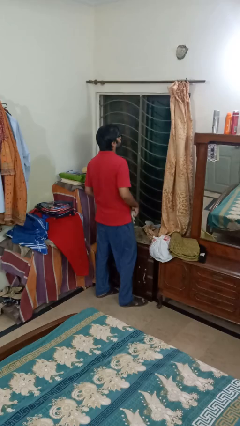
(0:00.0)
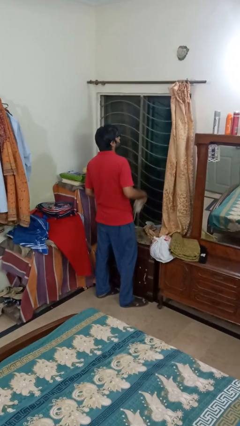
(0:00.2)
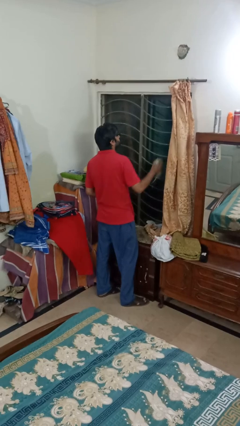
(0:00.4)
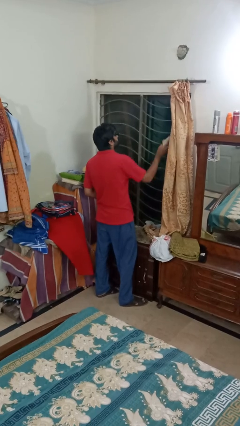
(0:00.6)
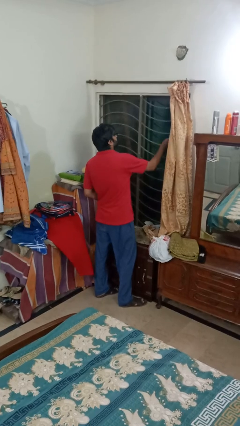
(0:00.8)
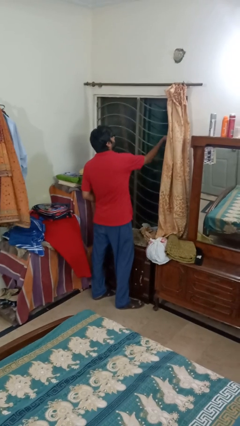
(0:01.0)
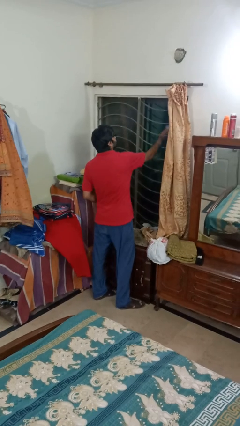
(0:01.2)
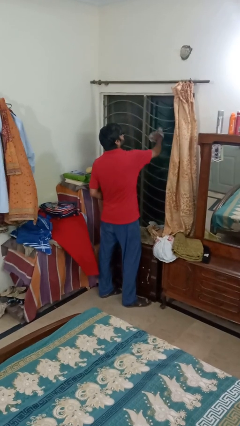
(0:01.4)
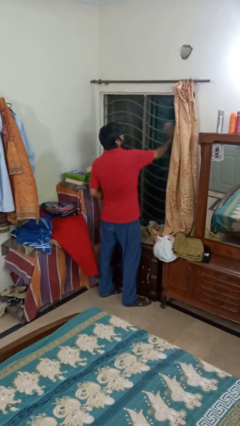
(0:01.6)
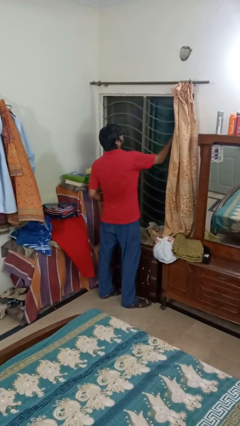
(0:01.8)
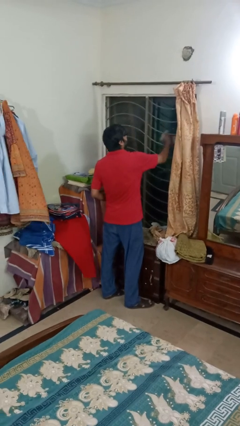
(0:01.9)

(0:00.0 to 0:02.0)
person washes window

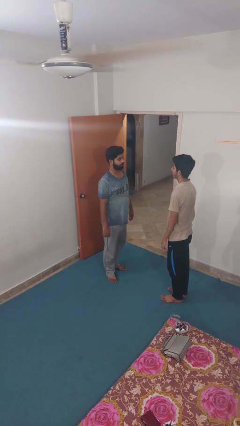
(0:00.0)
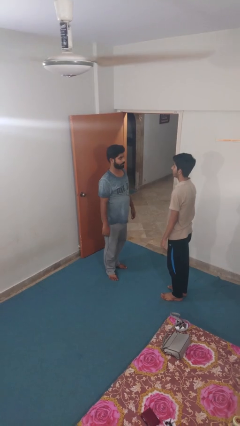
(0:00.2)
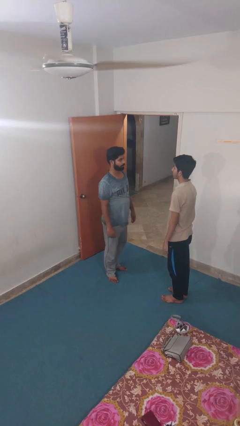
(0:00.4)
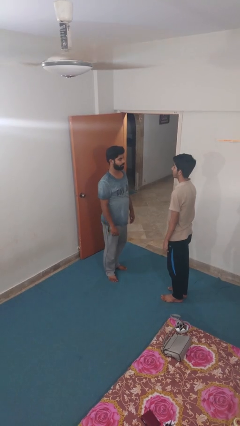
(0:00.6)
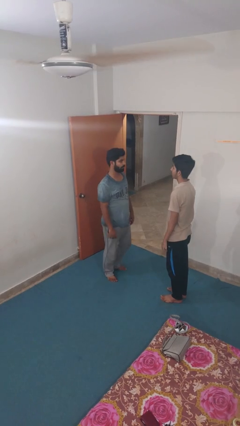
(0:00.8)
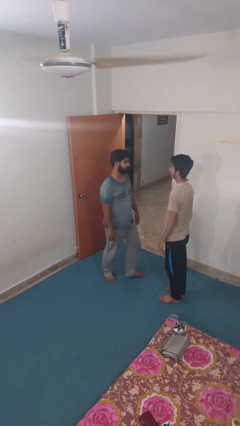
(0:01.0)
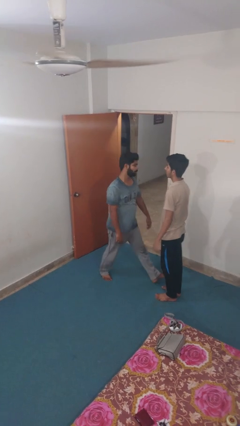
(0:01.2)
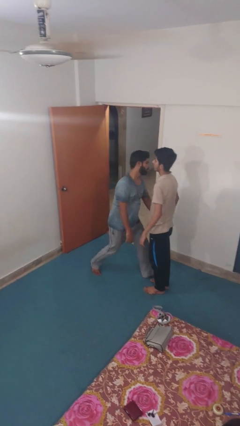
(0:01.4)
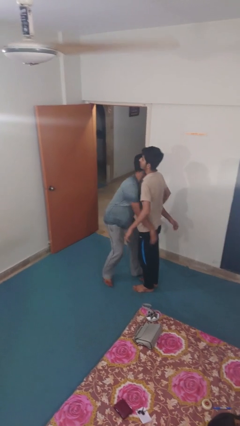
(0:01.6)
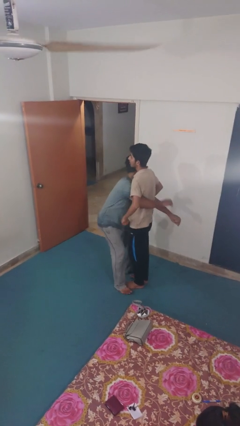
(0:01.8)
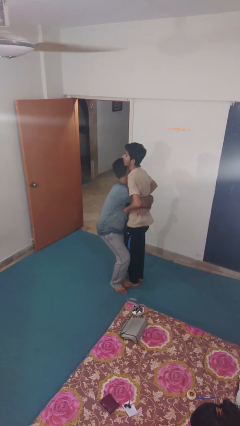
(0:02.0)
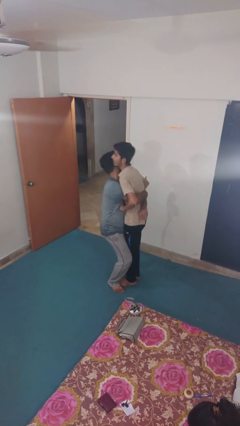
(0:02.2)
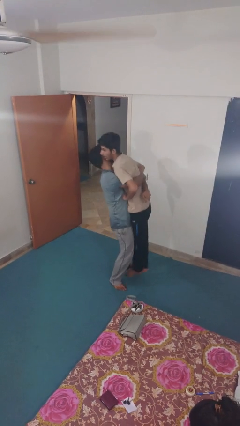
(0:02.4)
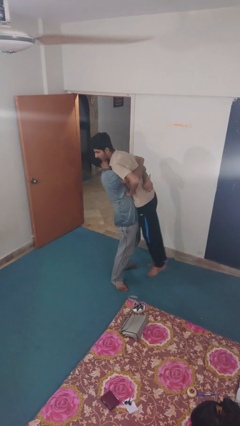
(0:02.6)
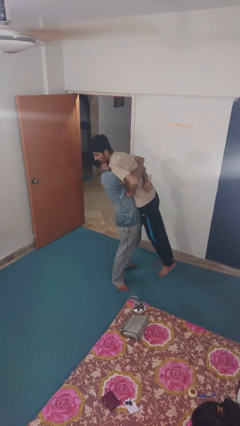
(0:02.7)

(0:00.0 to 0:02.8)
person picks up person

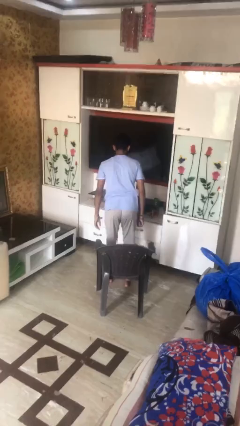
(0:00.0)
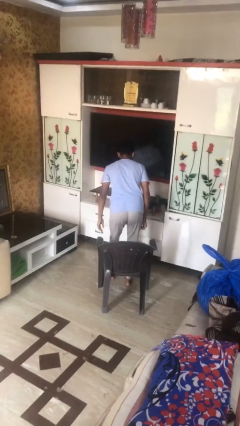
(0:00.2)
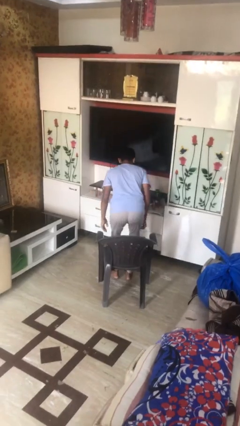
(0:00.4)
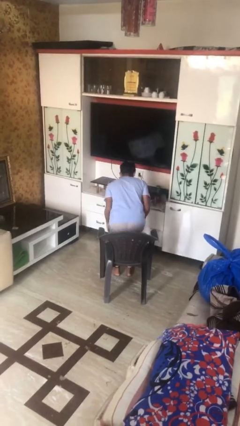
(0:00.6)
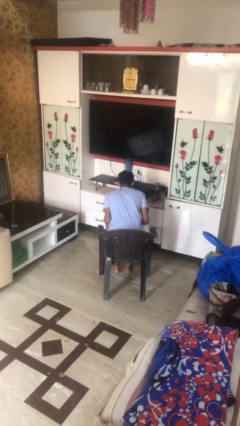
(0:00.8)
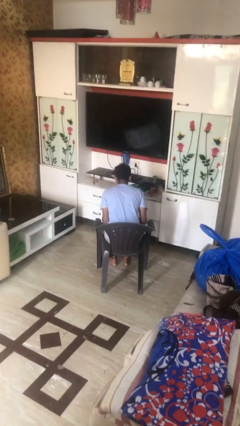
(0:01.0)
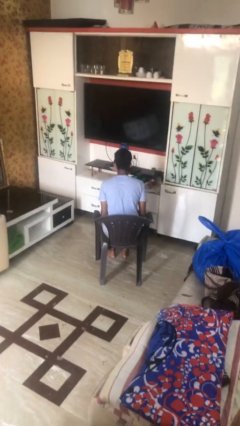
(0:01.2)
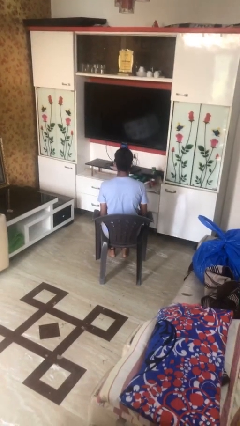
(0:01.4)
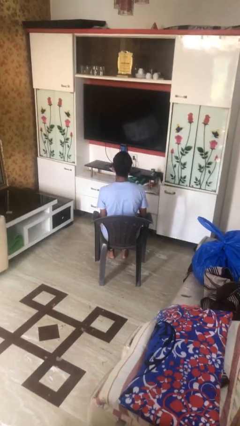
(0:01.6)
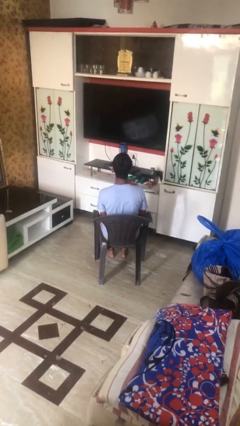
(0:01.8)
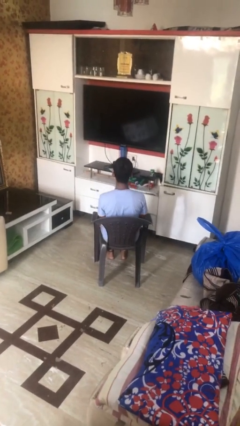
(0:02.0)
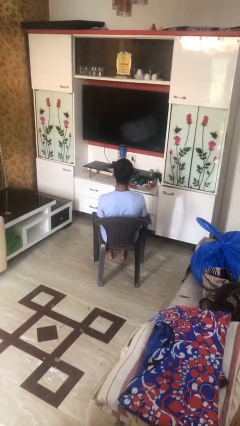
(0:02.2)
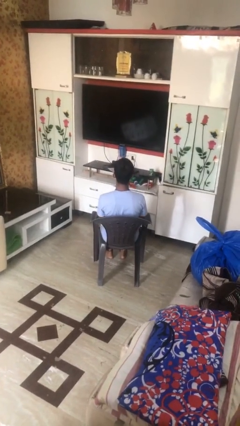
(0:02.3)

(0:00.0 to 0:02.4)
person sits down

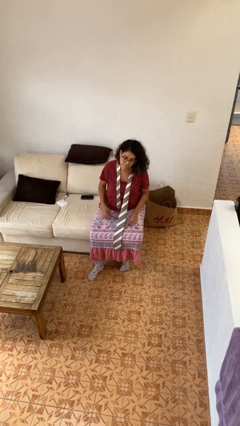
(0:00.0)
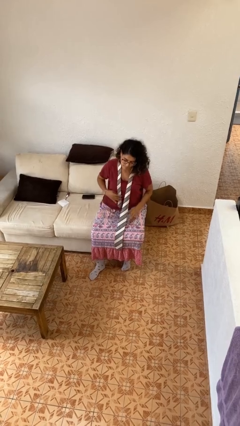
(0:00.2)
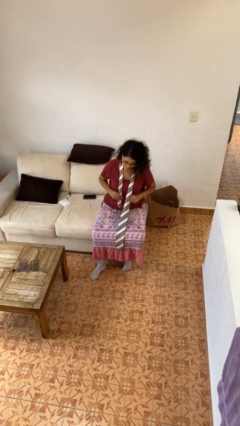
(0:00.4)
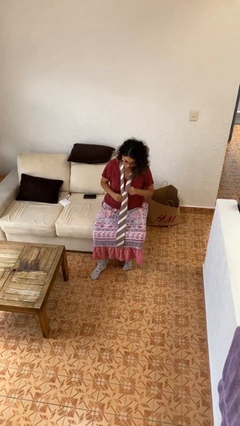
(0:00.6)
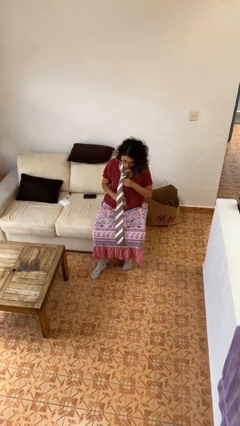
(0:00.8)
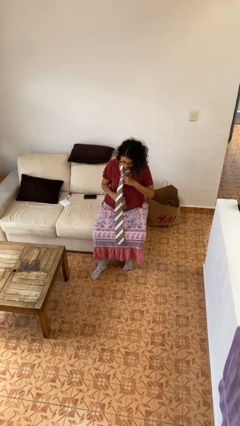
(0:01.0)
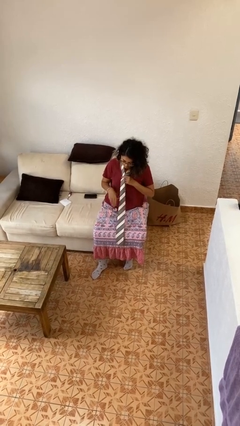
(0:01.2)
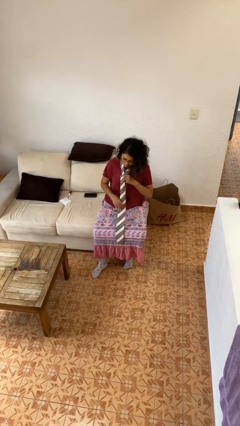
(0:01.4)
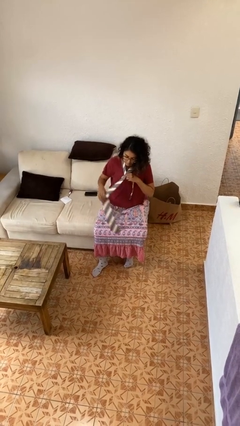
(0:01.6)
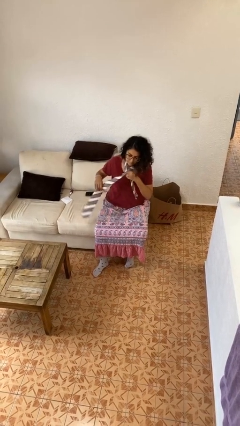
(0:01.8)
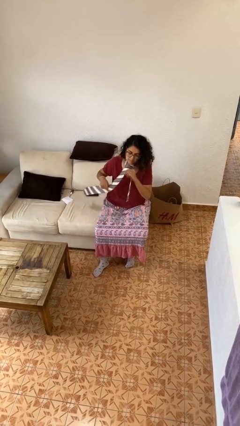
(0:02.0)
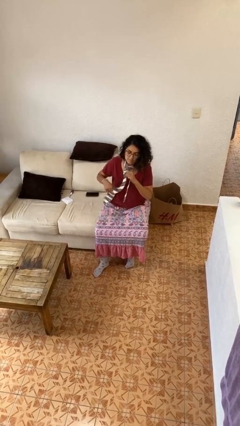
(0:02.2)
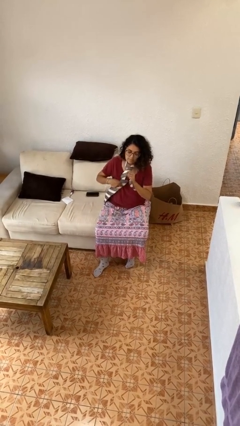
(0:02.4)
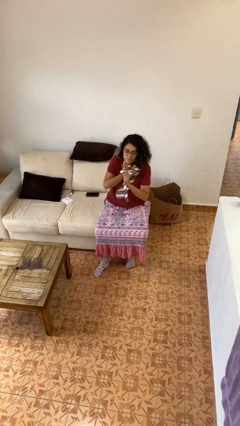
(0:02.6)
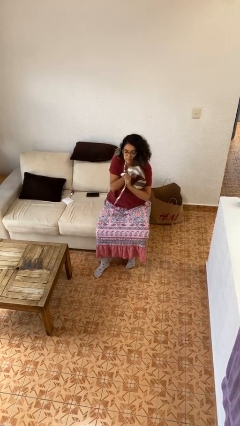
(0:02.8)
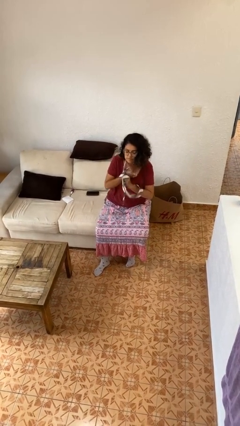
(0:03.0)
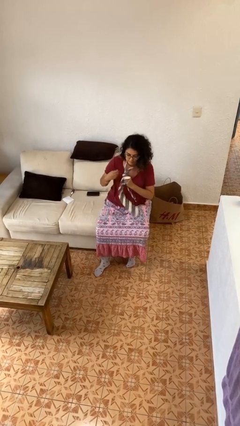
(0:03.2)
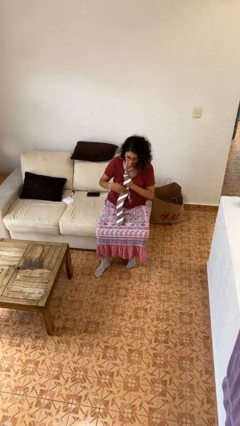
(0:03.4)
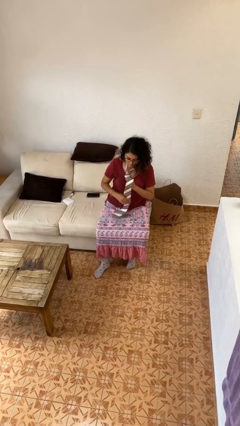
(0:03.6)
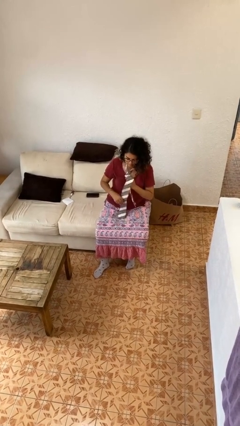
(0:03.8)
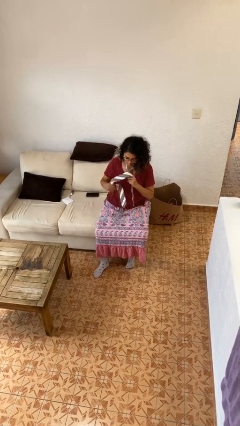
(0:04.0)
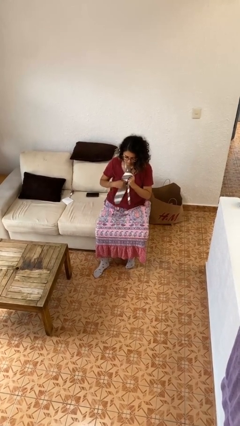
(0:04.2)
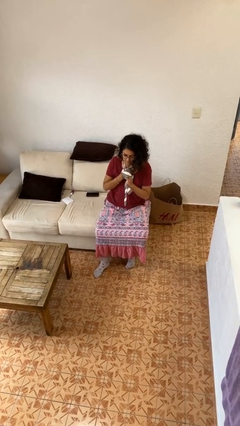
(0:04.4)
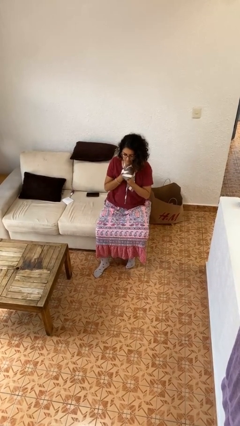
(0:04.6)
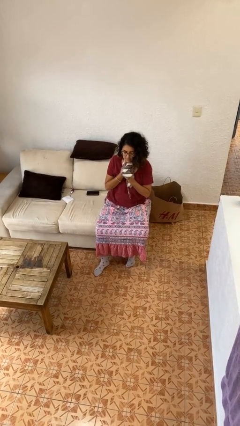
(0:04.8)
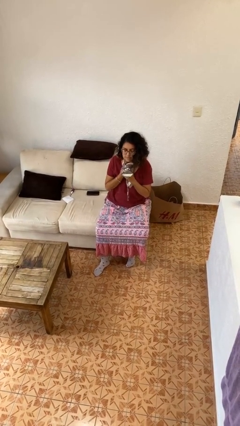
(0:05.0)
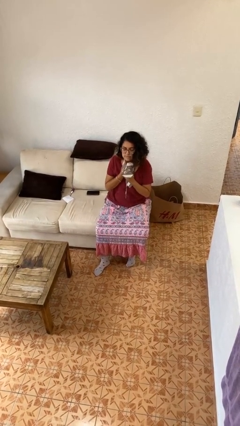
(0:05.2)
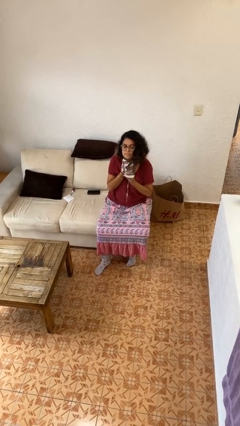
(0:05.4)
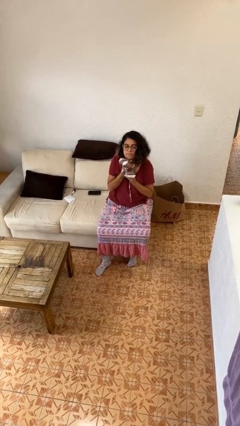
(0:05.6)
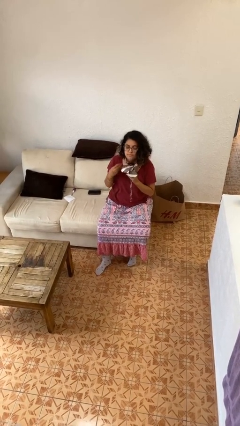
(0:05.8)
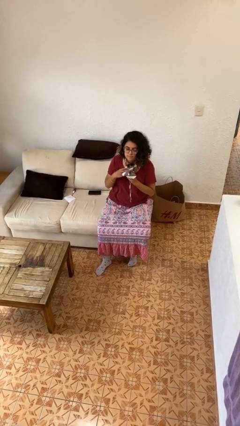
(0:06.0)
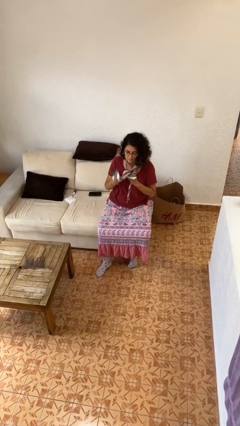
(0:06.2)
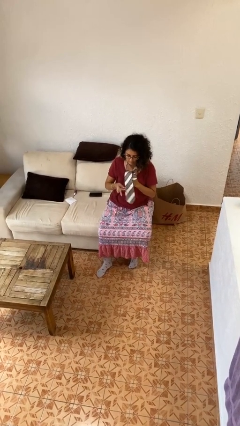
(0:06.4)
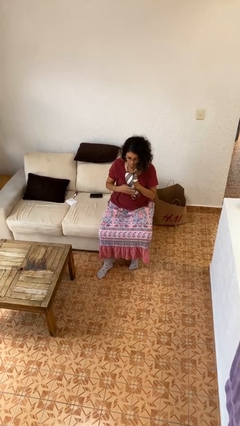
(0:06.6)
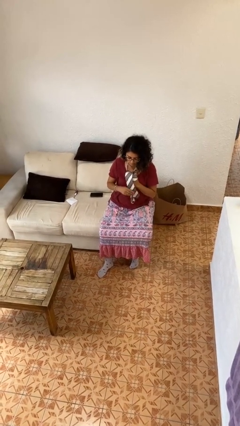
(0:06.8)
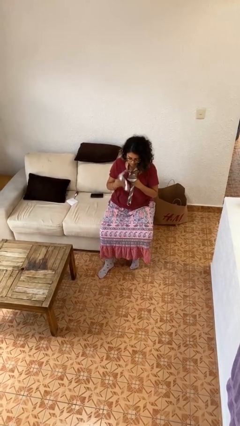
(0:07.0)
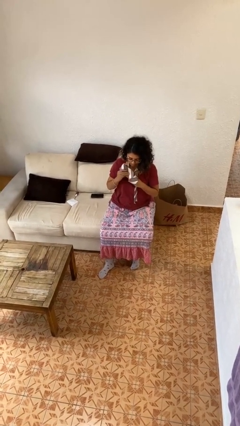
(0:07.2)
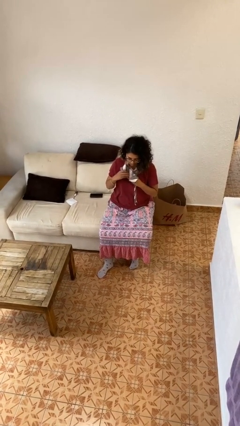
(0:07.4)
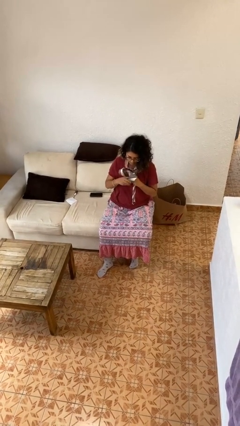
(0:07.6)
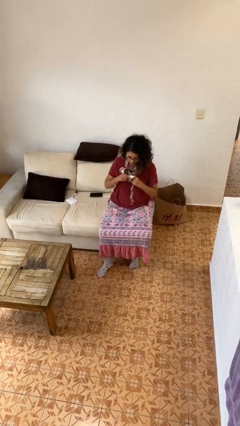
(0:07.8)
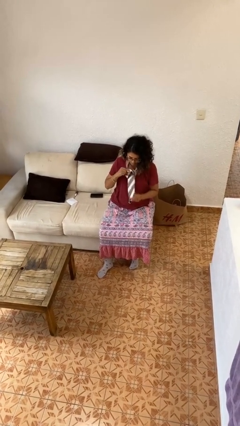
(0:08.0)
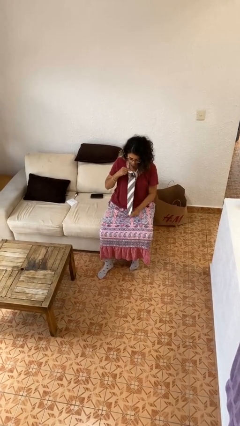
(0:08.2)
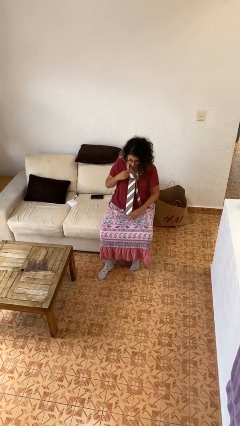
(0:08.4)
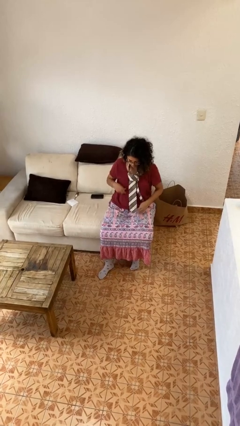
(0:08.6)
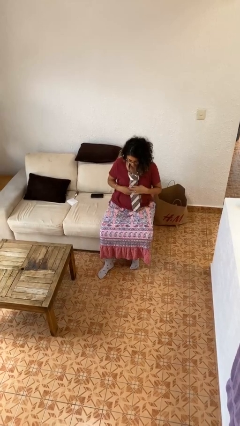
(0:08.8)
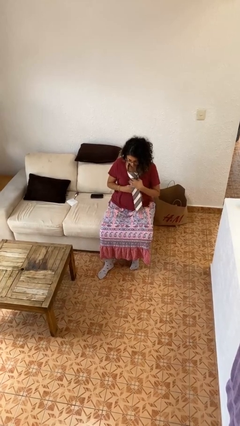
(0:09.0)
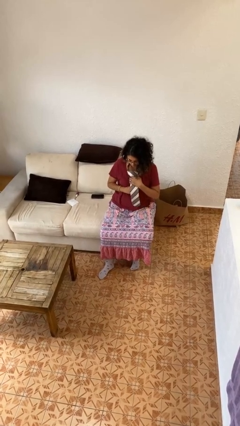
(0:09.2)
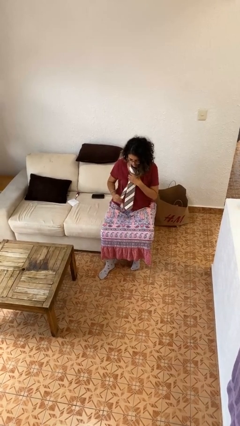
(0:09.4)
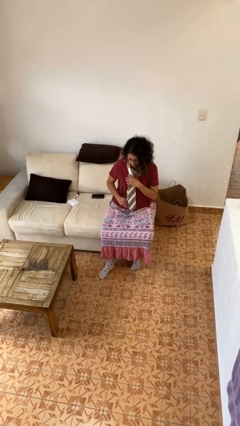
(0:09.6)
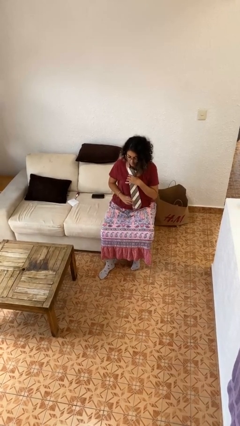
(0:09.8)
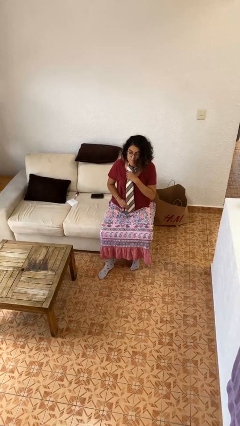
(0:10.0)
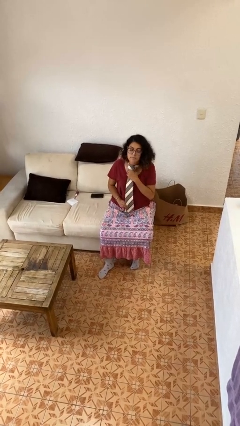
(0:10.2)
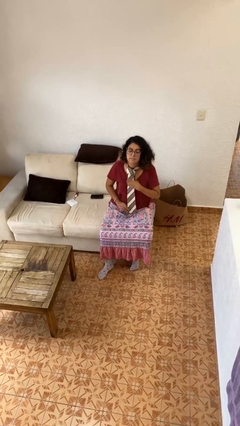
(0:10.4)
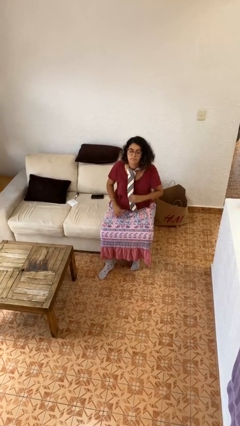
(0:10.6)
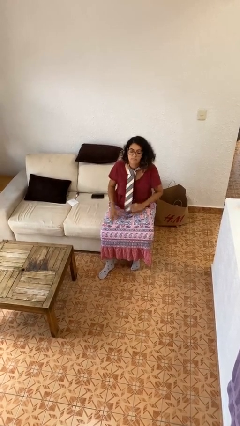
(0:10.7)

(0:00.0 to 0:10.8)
person puts on necktie
